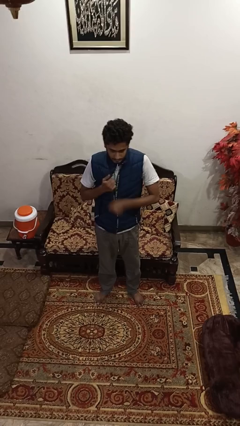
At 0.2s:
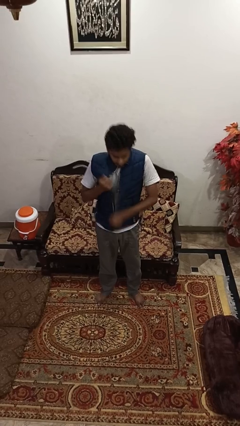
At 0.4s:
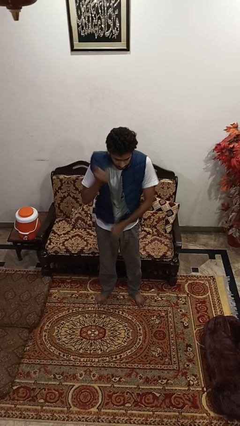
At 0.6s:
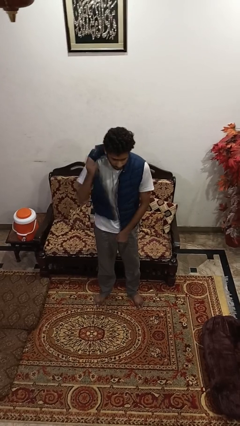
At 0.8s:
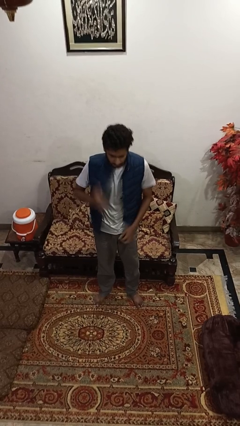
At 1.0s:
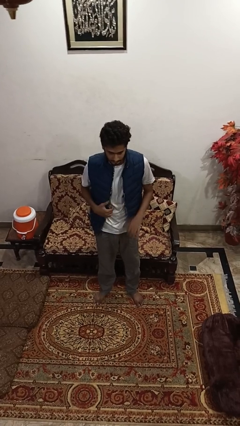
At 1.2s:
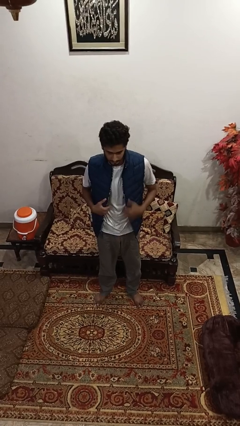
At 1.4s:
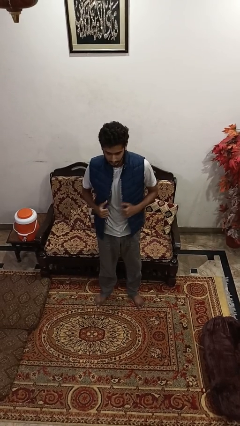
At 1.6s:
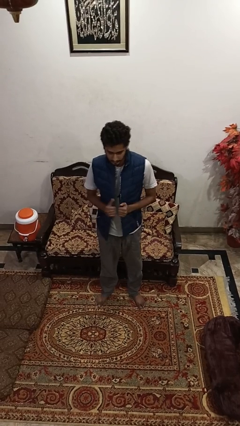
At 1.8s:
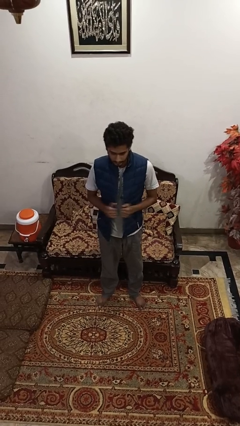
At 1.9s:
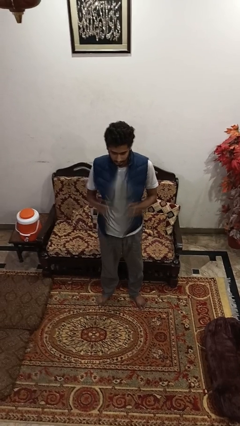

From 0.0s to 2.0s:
person unzips jacket

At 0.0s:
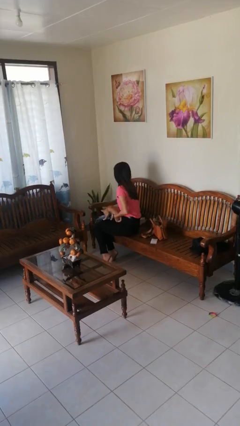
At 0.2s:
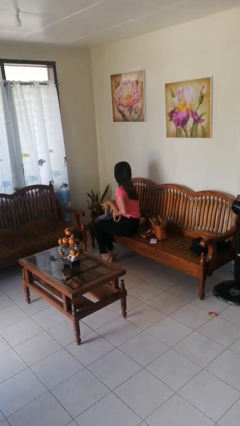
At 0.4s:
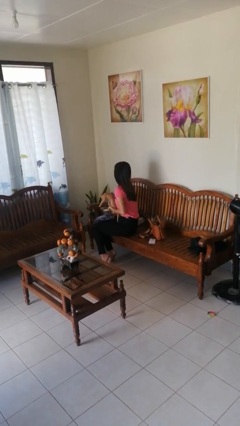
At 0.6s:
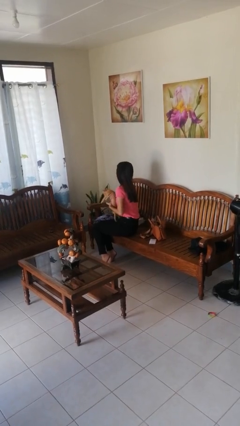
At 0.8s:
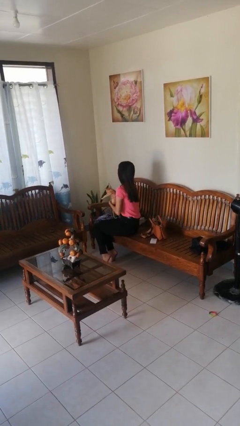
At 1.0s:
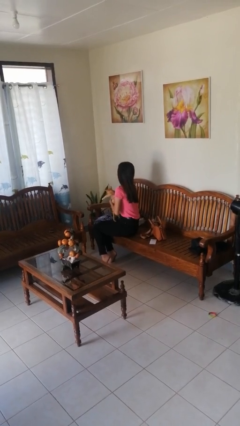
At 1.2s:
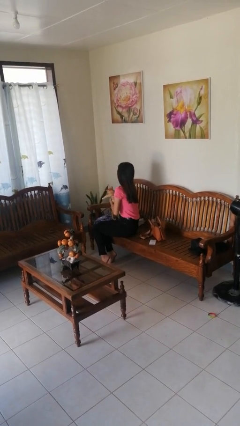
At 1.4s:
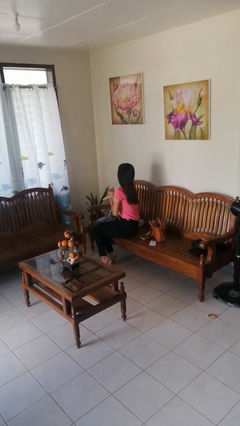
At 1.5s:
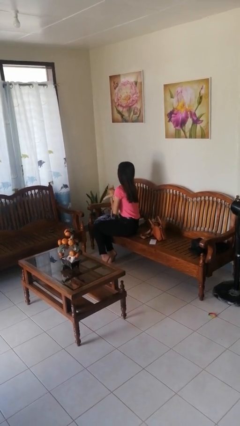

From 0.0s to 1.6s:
person hugs cat

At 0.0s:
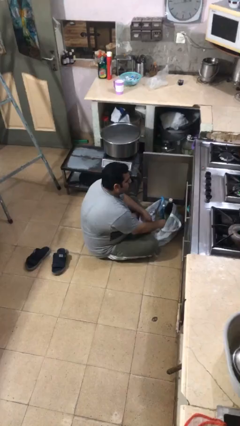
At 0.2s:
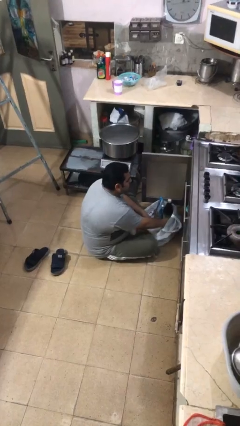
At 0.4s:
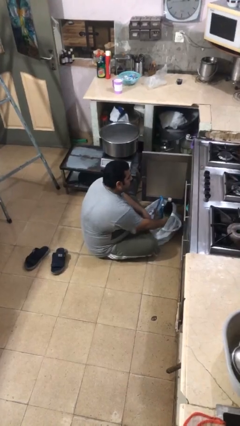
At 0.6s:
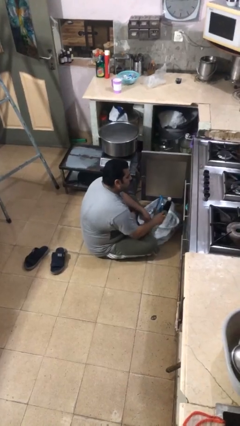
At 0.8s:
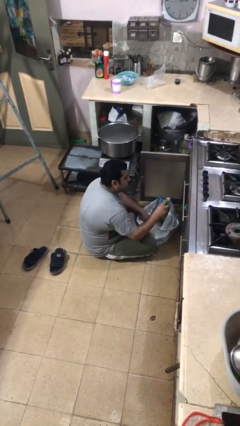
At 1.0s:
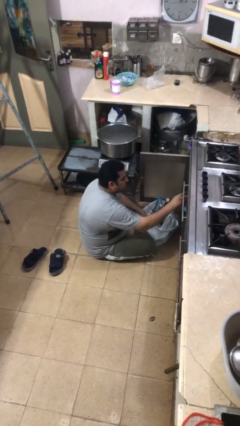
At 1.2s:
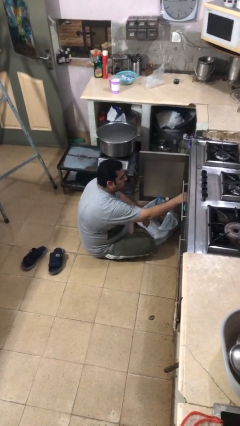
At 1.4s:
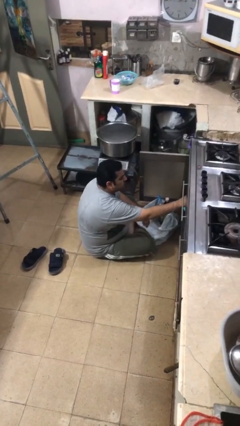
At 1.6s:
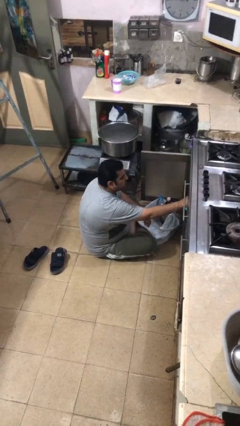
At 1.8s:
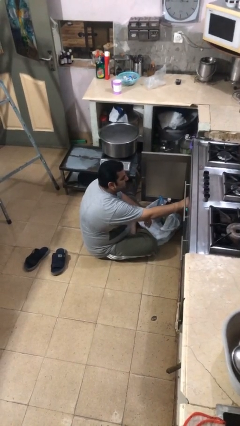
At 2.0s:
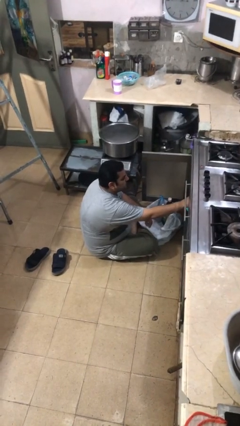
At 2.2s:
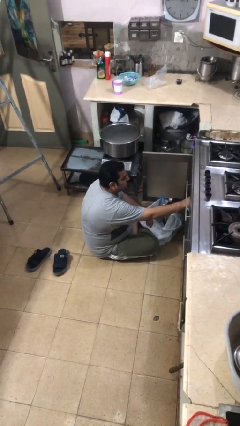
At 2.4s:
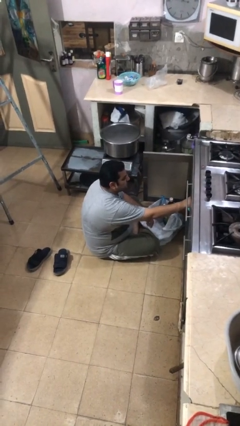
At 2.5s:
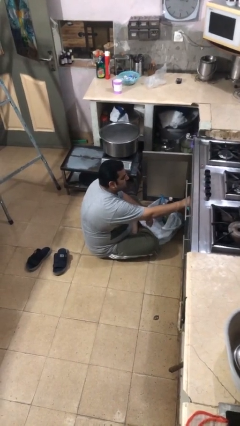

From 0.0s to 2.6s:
person loads groceries into cabinet

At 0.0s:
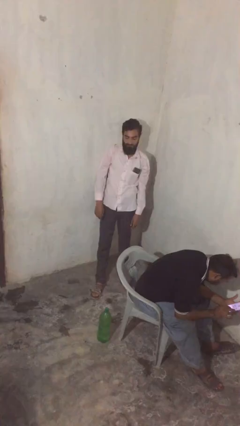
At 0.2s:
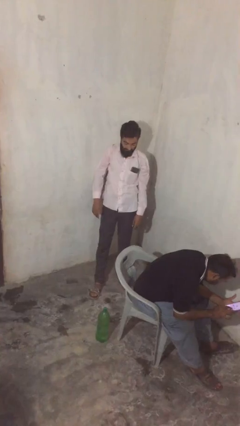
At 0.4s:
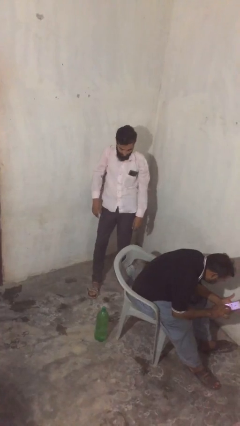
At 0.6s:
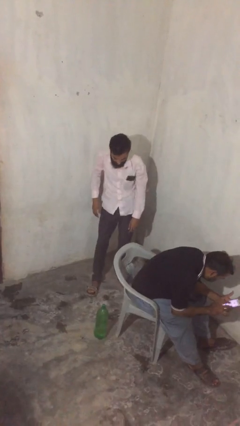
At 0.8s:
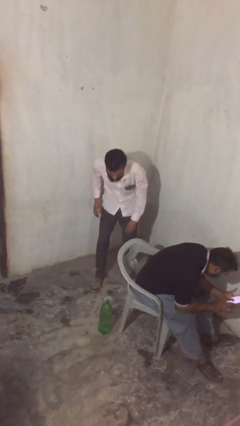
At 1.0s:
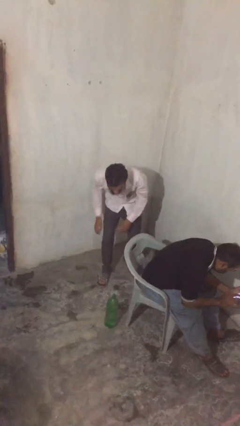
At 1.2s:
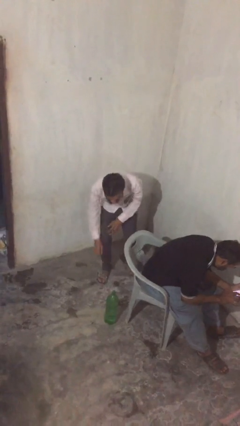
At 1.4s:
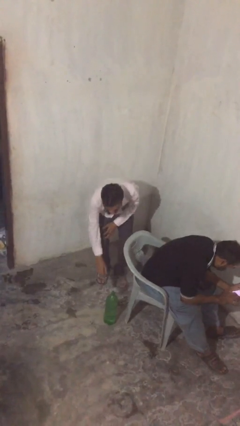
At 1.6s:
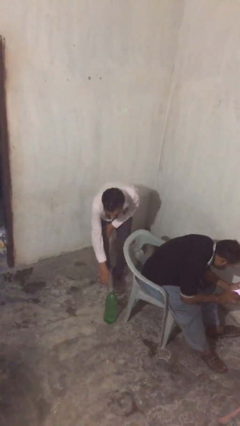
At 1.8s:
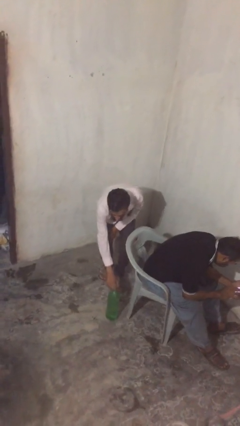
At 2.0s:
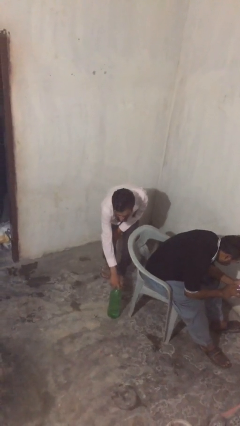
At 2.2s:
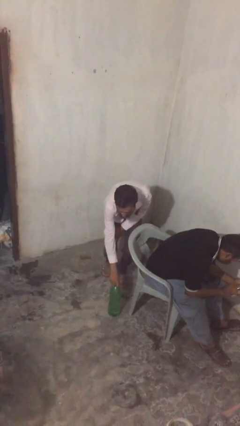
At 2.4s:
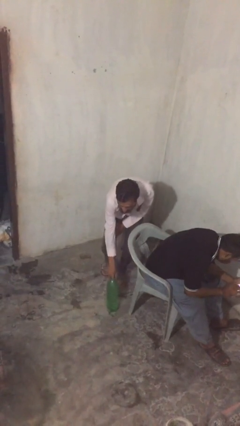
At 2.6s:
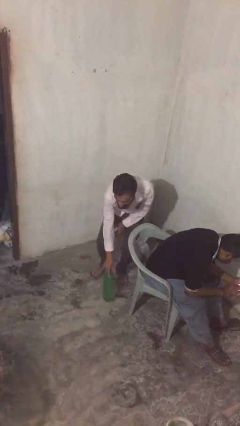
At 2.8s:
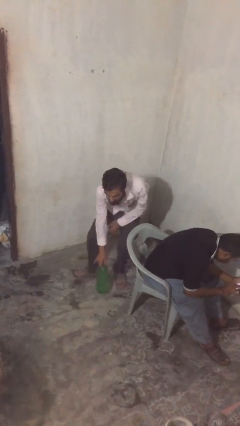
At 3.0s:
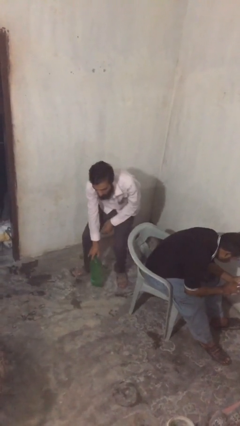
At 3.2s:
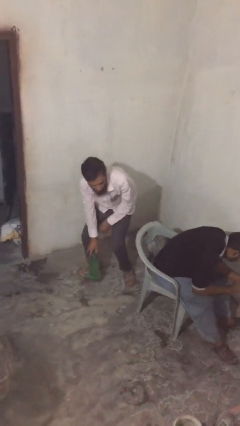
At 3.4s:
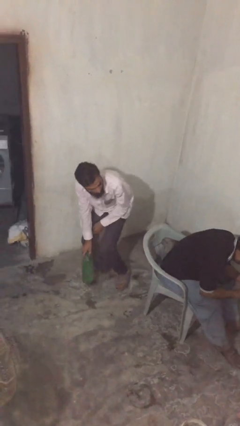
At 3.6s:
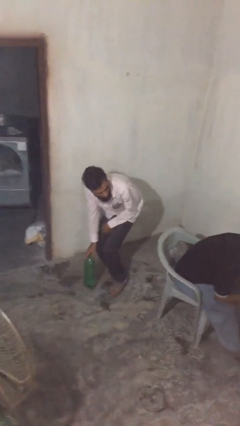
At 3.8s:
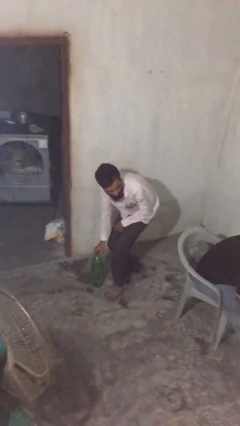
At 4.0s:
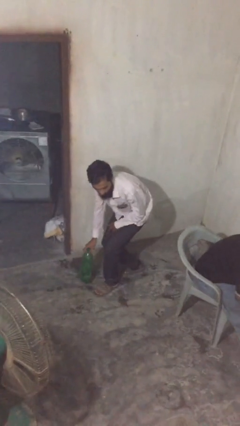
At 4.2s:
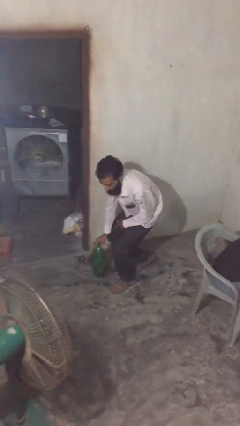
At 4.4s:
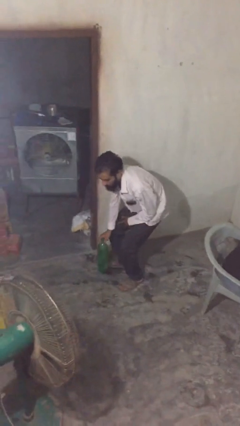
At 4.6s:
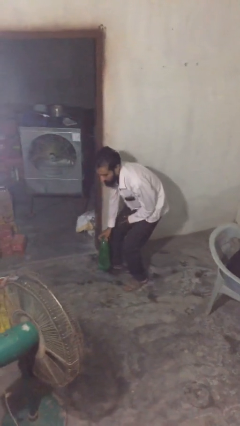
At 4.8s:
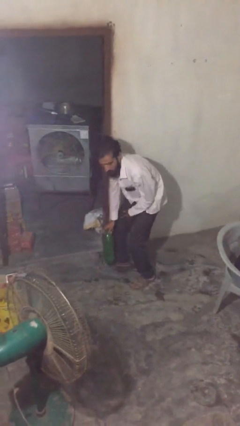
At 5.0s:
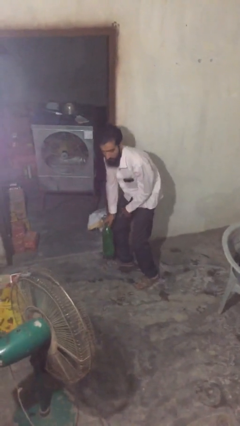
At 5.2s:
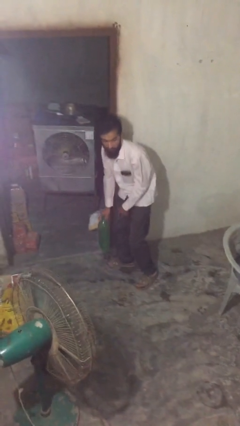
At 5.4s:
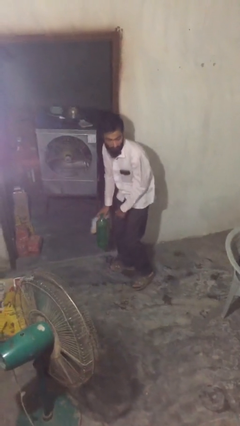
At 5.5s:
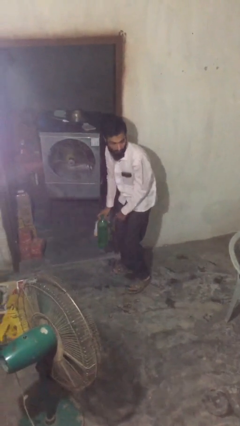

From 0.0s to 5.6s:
person steals object from person

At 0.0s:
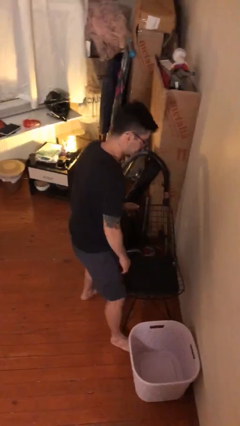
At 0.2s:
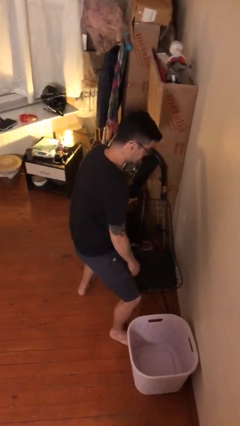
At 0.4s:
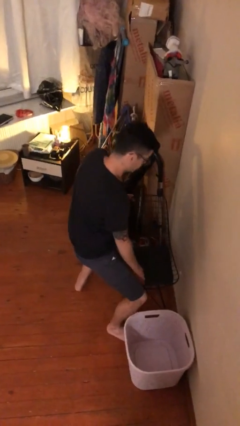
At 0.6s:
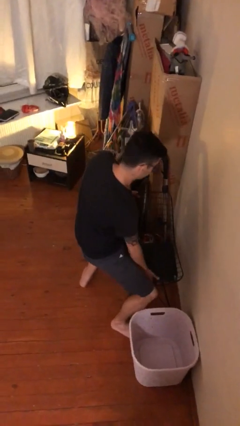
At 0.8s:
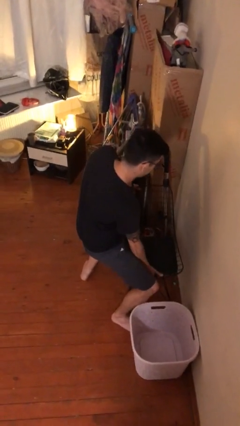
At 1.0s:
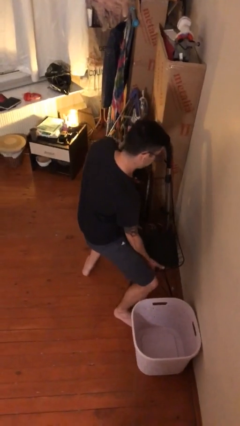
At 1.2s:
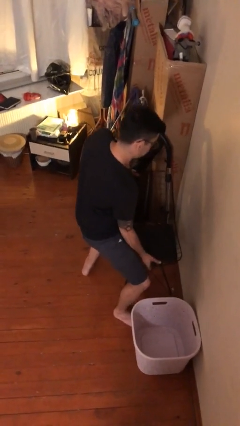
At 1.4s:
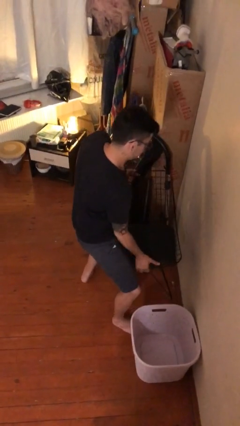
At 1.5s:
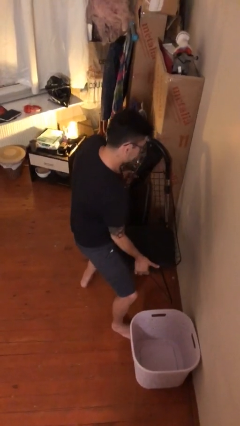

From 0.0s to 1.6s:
person picks up object from floor

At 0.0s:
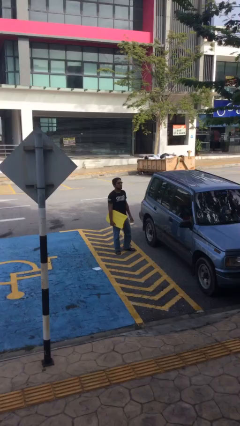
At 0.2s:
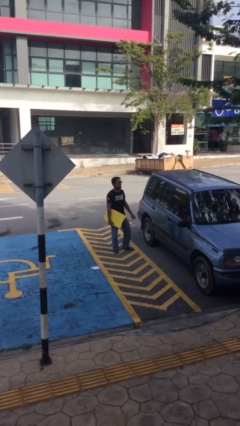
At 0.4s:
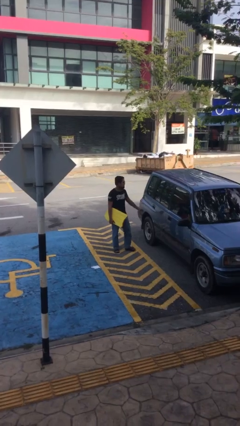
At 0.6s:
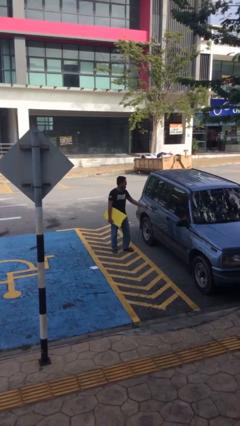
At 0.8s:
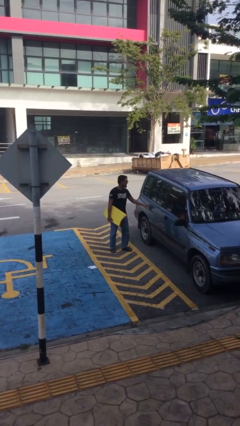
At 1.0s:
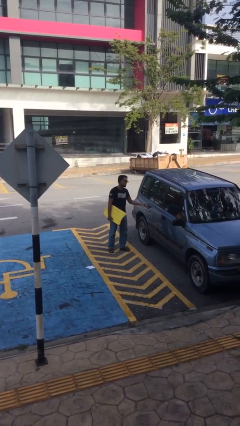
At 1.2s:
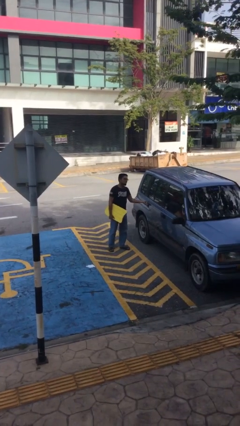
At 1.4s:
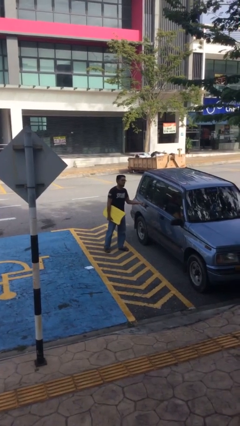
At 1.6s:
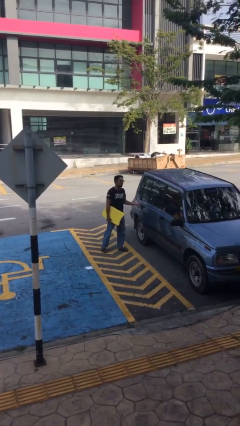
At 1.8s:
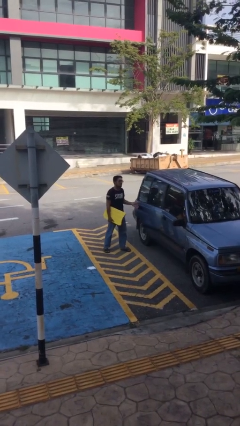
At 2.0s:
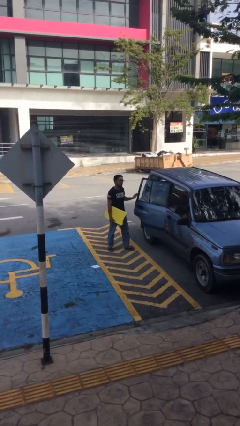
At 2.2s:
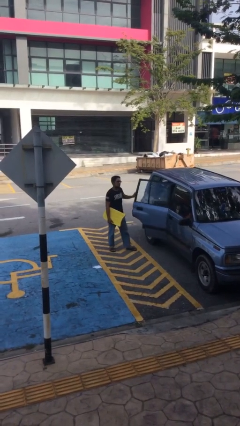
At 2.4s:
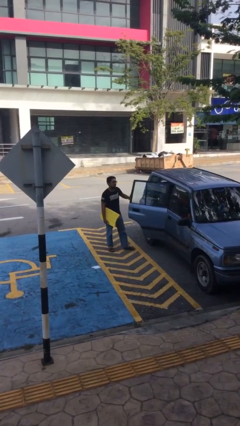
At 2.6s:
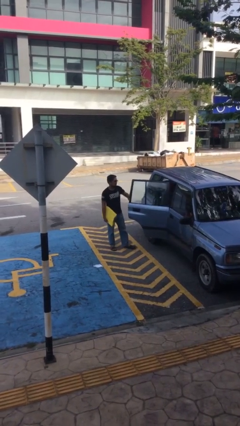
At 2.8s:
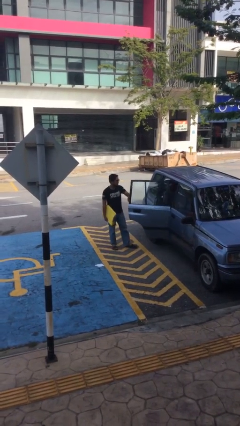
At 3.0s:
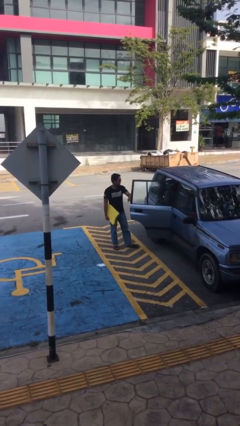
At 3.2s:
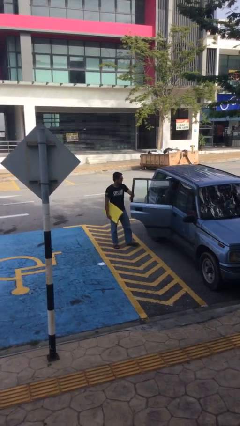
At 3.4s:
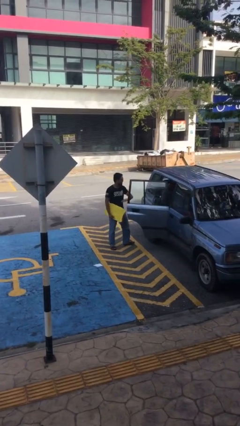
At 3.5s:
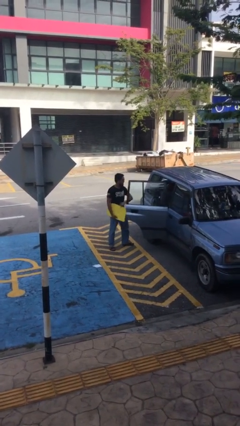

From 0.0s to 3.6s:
person opens car door

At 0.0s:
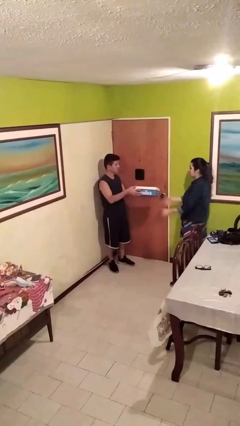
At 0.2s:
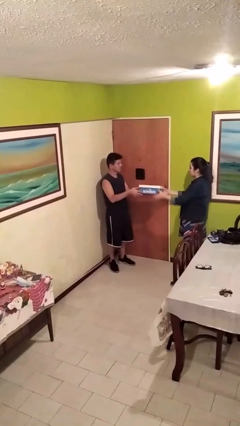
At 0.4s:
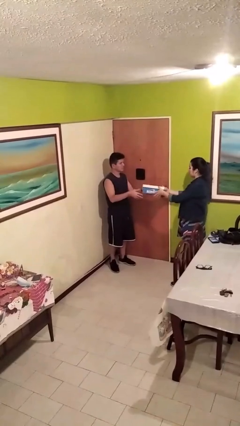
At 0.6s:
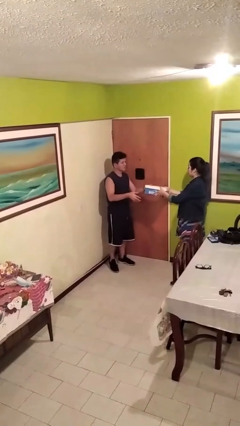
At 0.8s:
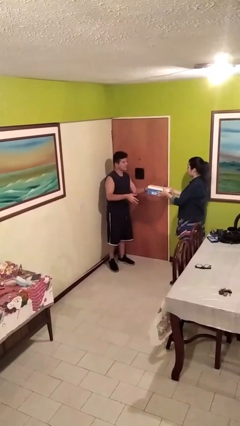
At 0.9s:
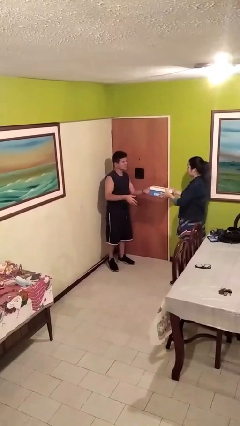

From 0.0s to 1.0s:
person transfers object to person
